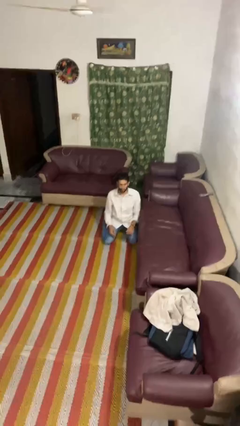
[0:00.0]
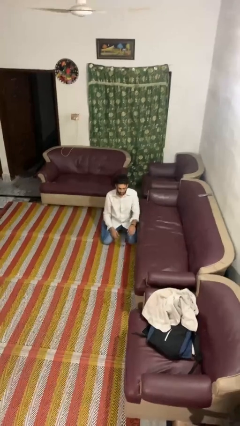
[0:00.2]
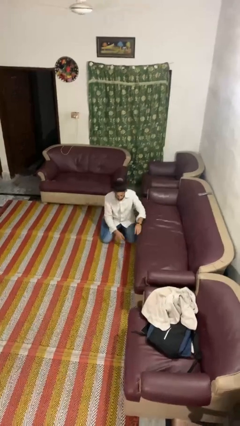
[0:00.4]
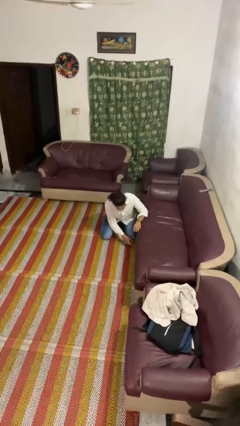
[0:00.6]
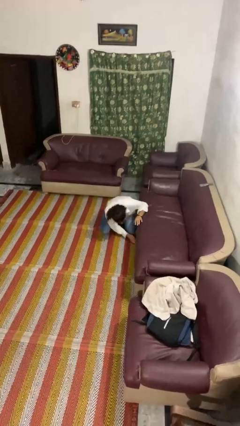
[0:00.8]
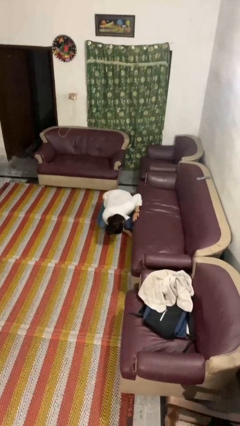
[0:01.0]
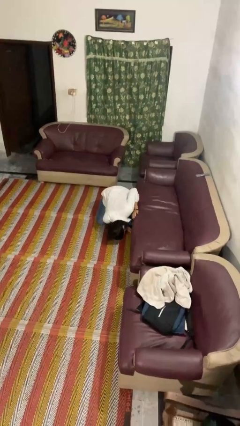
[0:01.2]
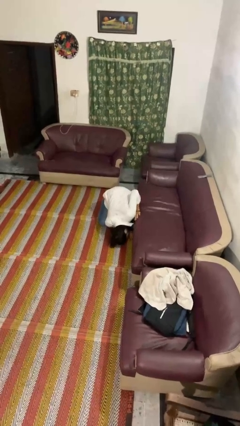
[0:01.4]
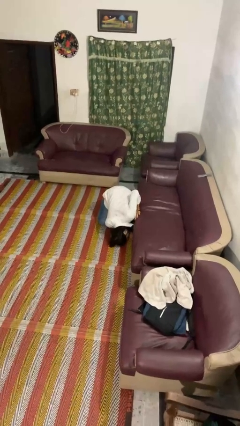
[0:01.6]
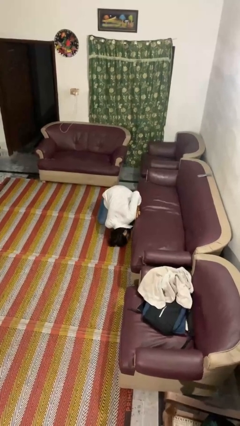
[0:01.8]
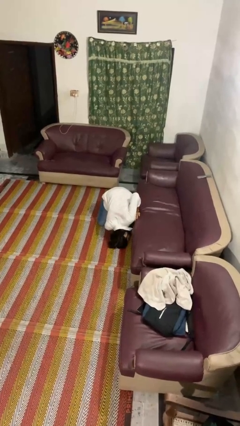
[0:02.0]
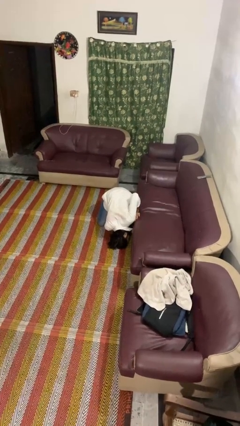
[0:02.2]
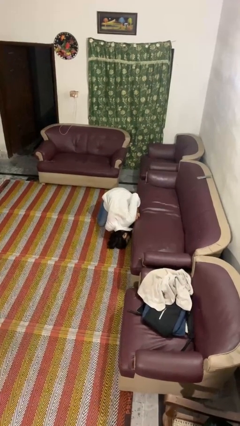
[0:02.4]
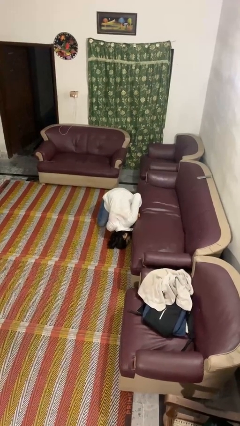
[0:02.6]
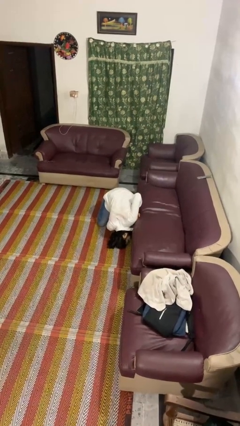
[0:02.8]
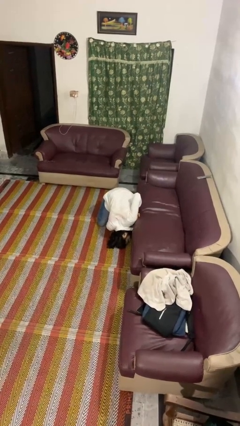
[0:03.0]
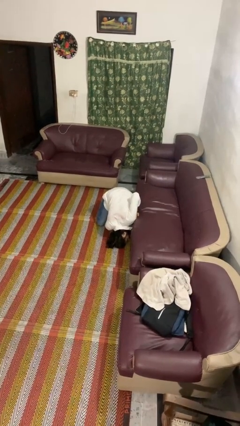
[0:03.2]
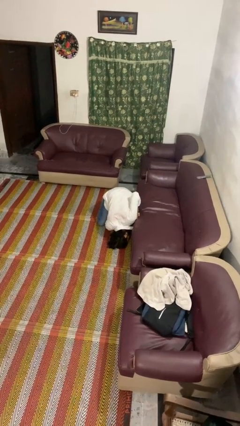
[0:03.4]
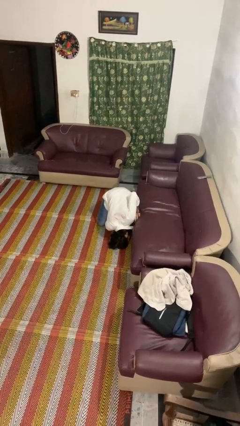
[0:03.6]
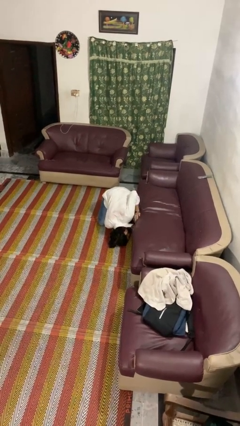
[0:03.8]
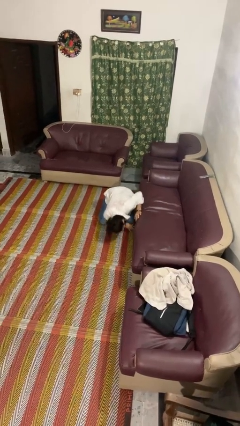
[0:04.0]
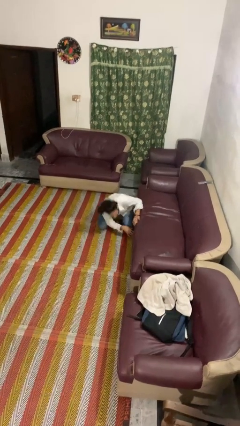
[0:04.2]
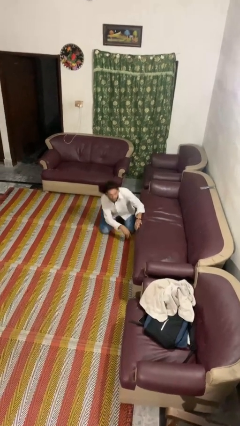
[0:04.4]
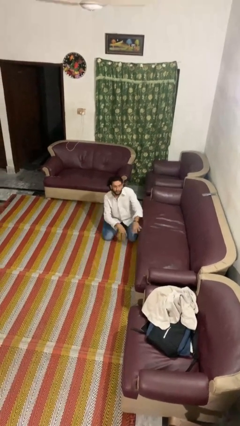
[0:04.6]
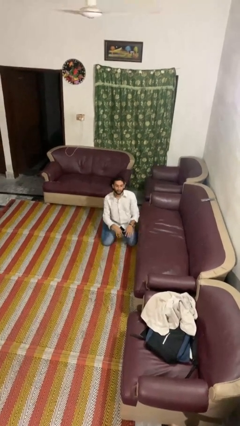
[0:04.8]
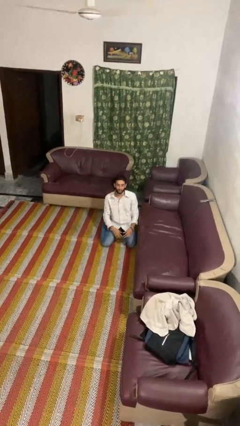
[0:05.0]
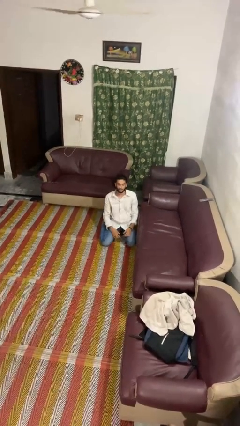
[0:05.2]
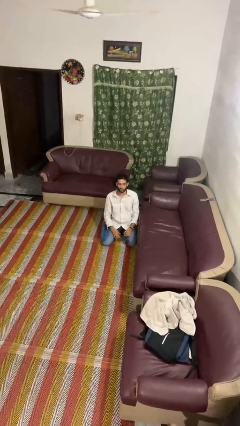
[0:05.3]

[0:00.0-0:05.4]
person searches under couch

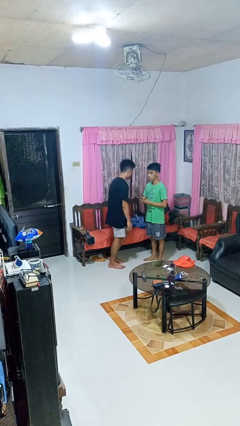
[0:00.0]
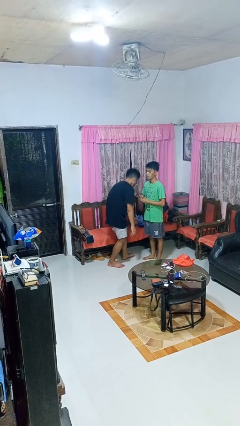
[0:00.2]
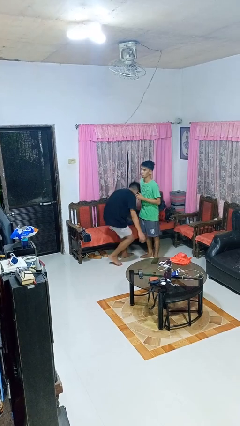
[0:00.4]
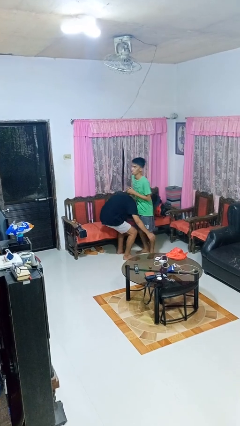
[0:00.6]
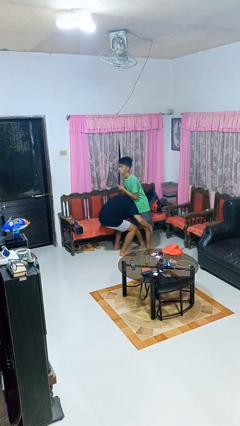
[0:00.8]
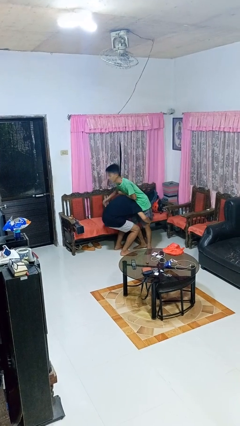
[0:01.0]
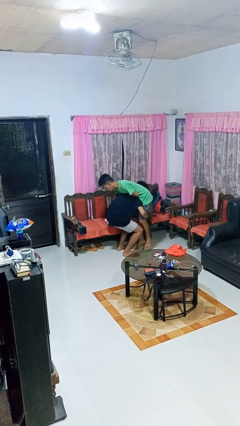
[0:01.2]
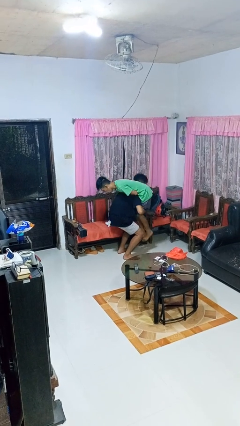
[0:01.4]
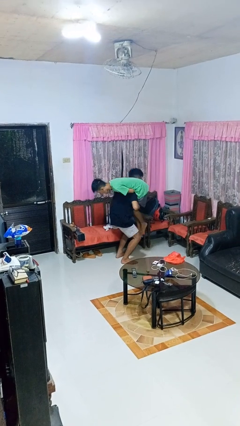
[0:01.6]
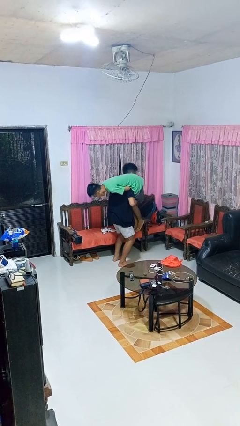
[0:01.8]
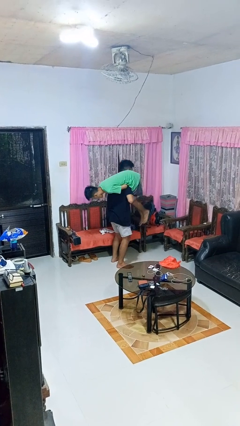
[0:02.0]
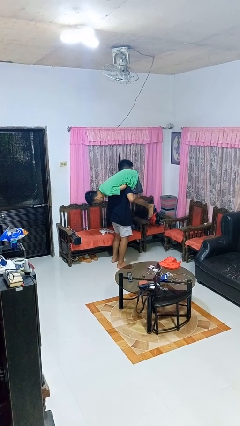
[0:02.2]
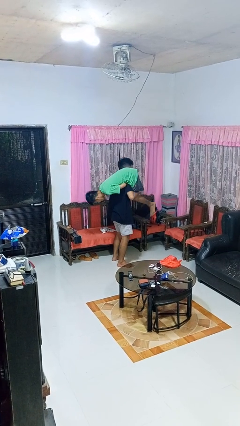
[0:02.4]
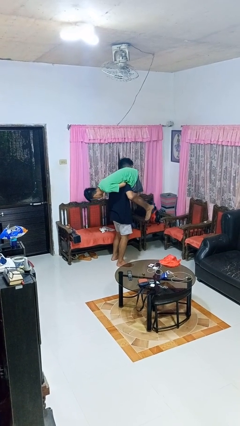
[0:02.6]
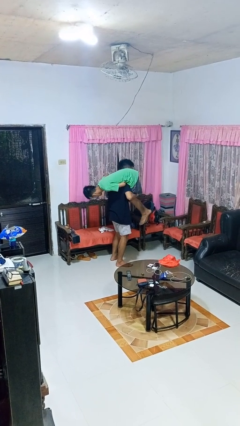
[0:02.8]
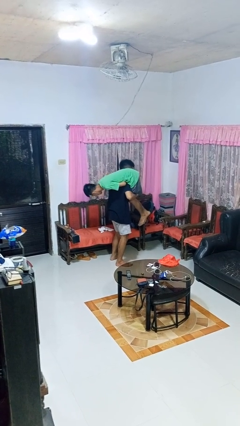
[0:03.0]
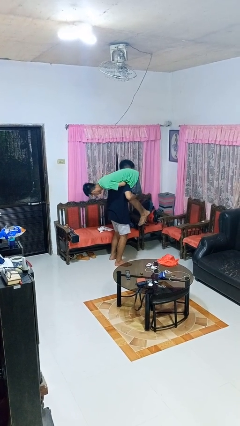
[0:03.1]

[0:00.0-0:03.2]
person carries person over shoulder

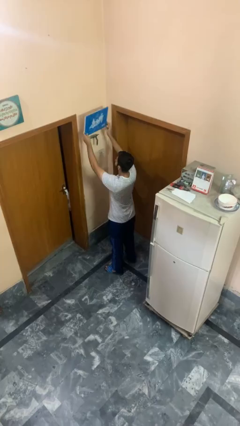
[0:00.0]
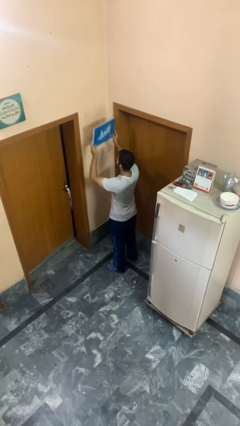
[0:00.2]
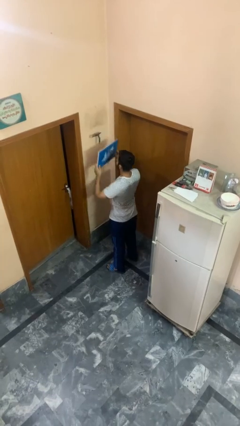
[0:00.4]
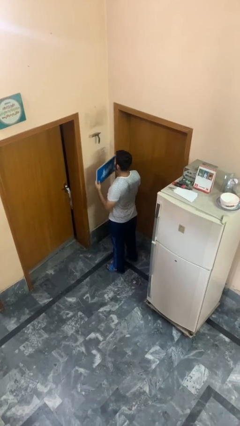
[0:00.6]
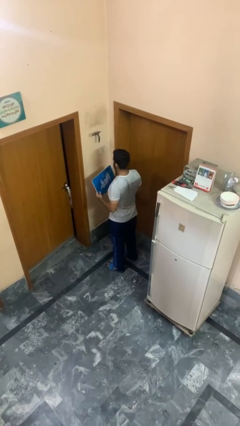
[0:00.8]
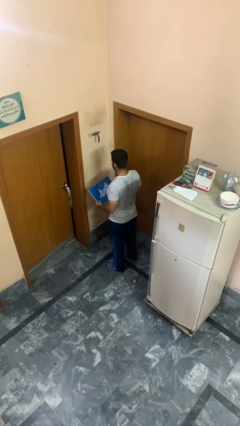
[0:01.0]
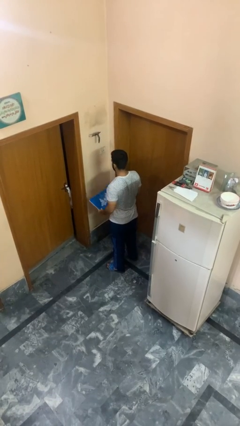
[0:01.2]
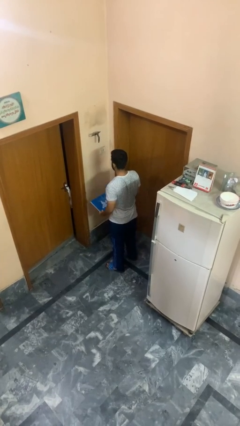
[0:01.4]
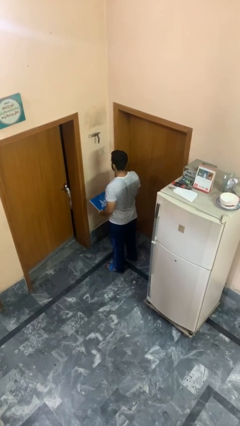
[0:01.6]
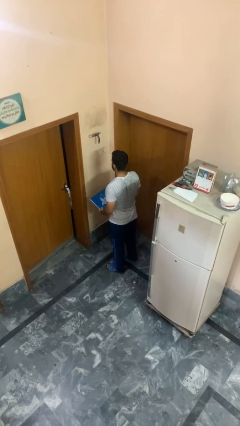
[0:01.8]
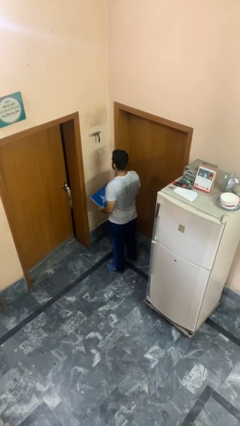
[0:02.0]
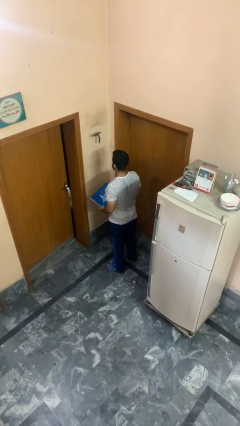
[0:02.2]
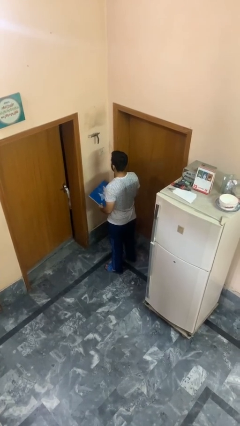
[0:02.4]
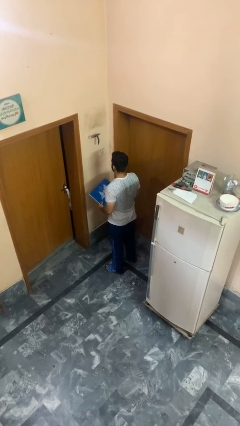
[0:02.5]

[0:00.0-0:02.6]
person takes down picture frame

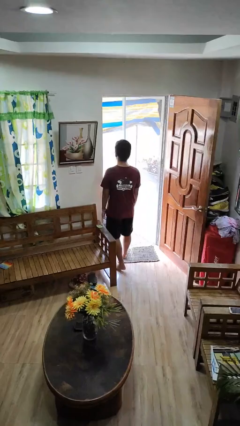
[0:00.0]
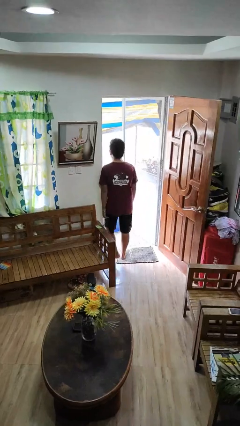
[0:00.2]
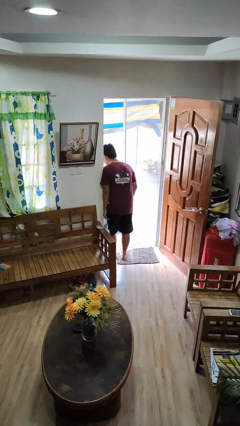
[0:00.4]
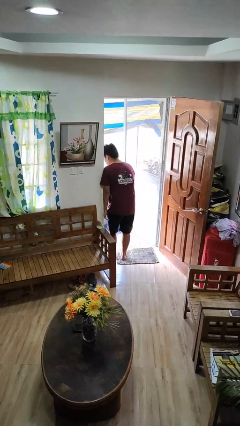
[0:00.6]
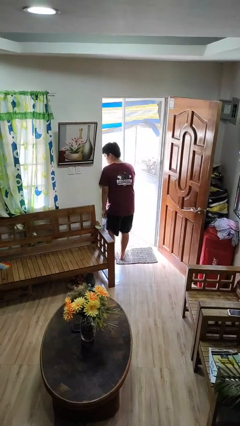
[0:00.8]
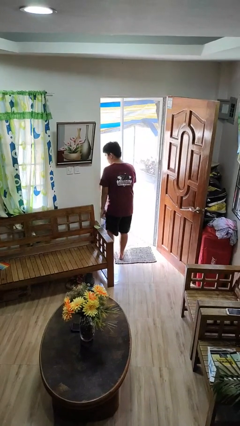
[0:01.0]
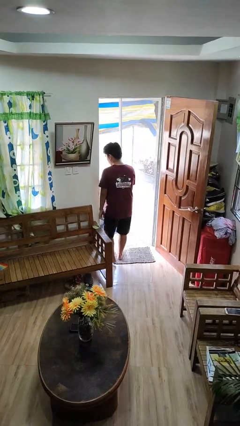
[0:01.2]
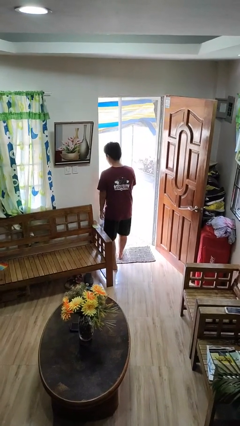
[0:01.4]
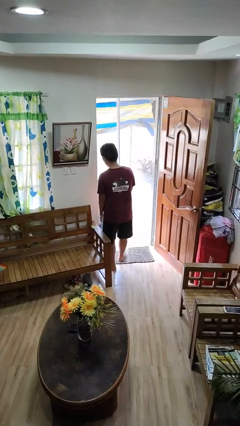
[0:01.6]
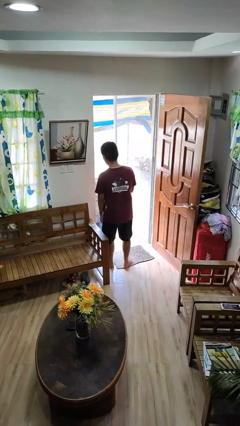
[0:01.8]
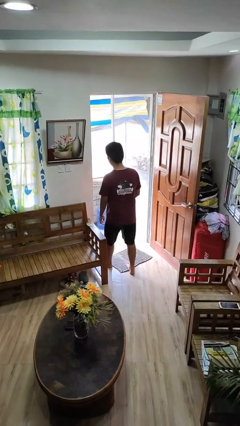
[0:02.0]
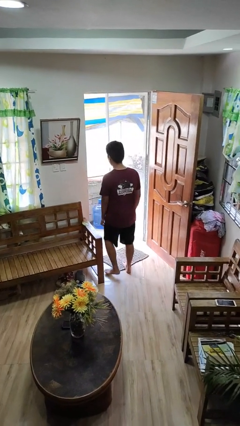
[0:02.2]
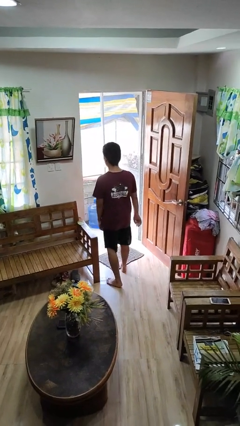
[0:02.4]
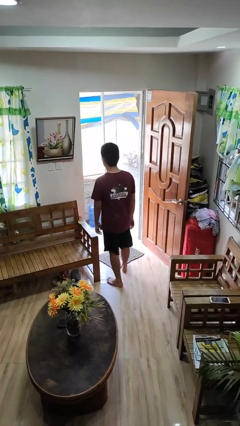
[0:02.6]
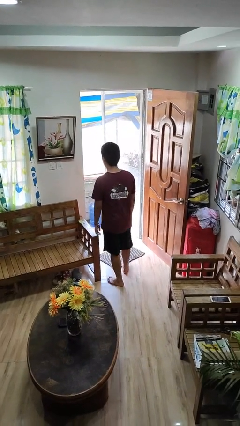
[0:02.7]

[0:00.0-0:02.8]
person bumps into wall

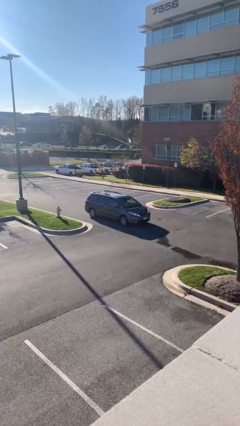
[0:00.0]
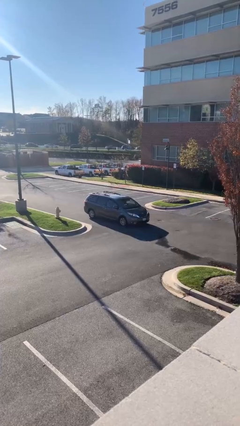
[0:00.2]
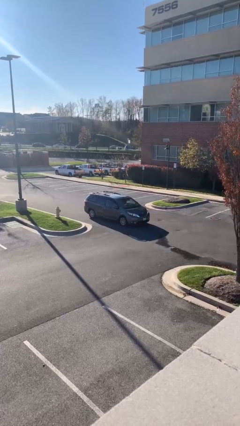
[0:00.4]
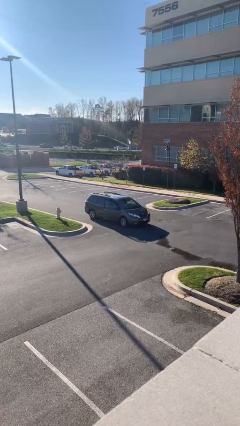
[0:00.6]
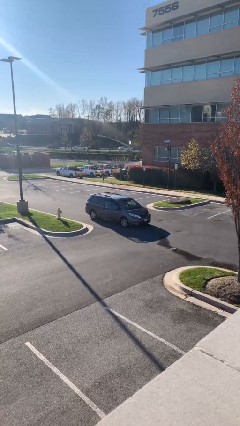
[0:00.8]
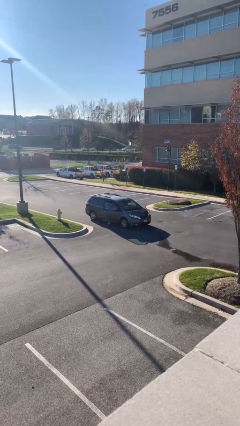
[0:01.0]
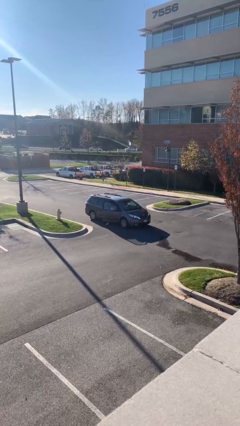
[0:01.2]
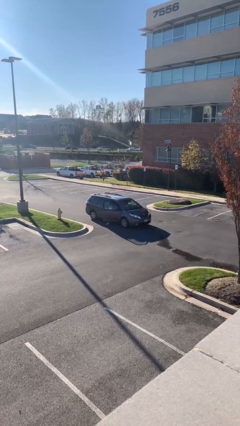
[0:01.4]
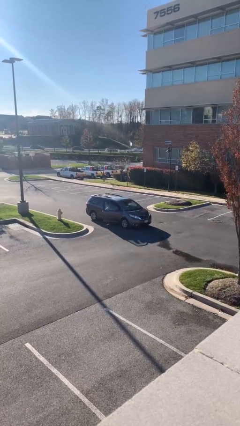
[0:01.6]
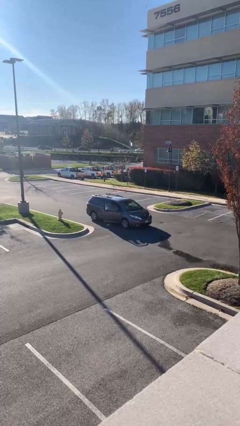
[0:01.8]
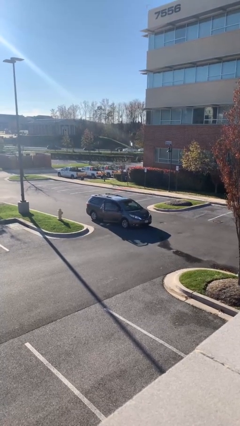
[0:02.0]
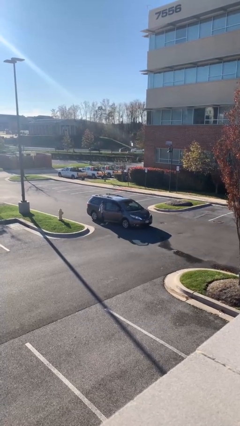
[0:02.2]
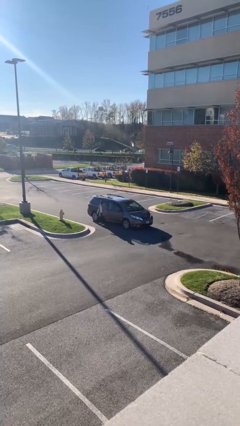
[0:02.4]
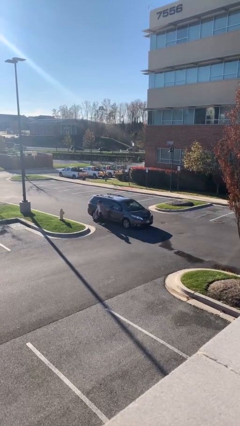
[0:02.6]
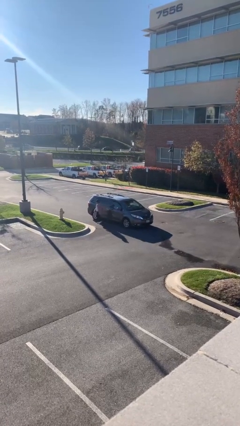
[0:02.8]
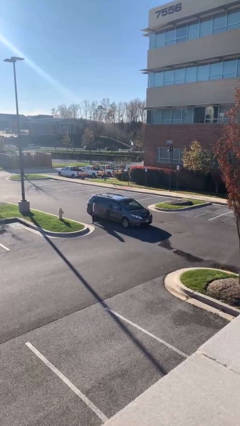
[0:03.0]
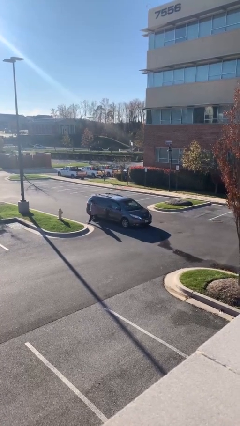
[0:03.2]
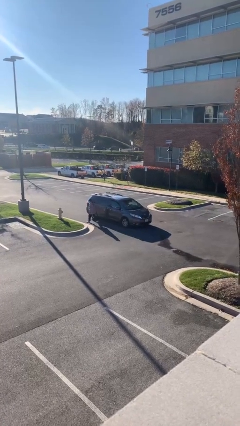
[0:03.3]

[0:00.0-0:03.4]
car drops off person
